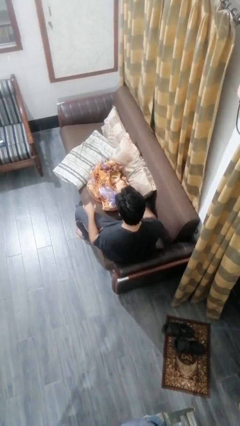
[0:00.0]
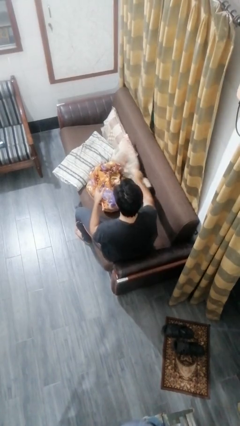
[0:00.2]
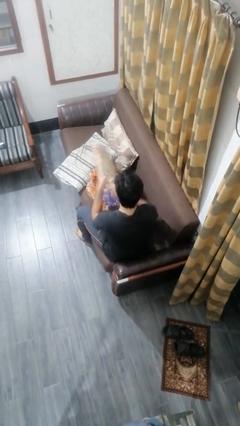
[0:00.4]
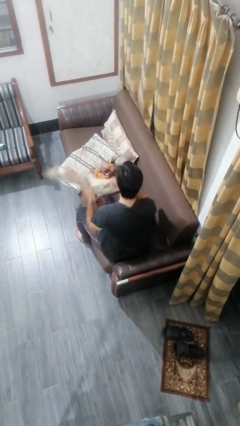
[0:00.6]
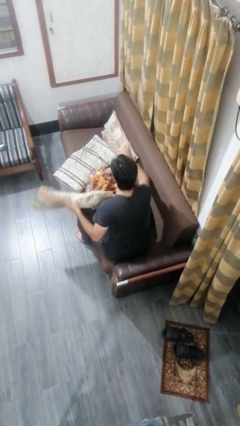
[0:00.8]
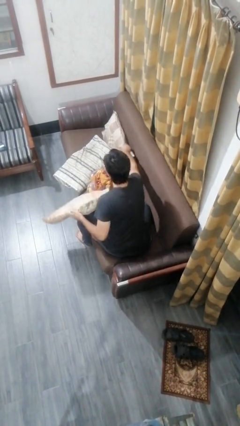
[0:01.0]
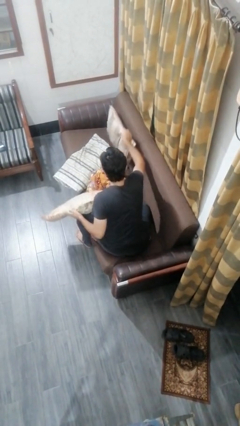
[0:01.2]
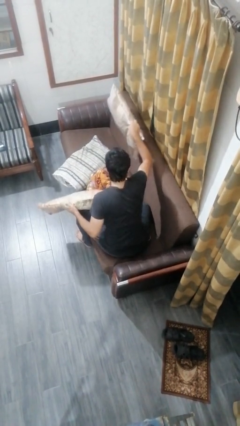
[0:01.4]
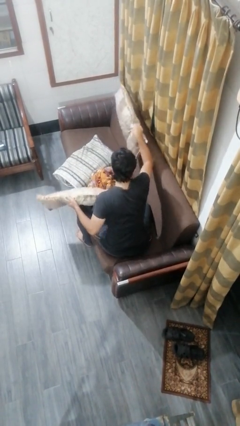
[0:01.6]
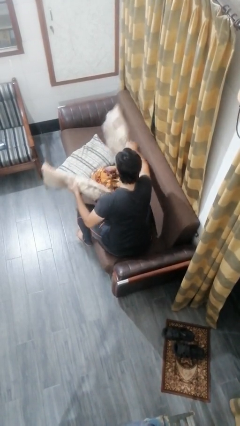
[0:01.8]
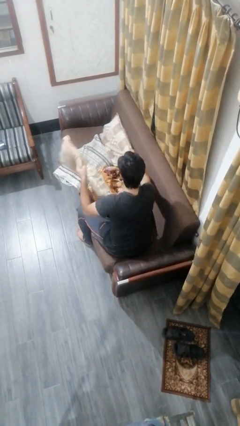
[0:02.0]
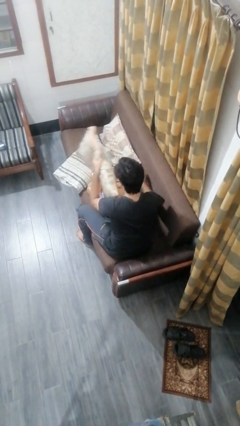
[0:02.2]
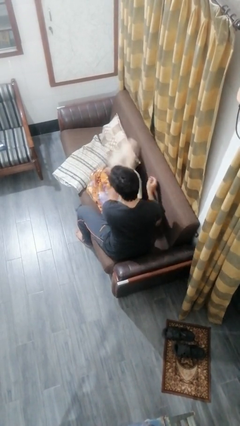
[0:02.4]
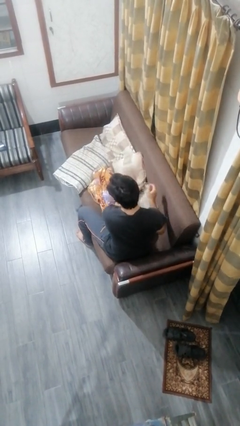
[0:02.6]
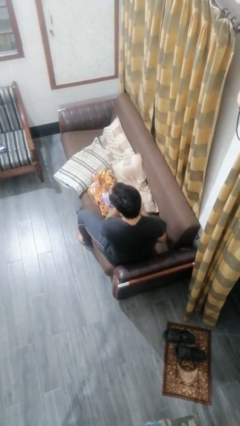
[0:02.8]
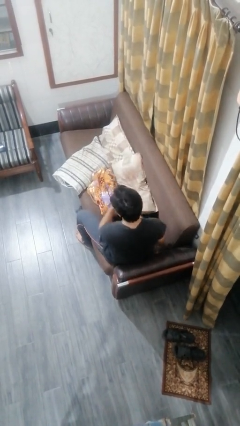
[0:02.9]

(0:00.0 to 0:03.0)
person searches in couch

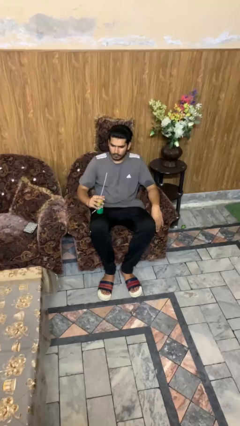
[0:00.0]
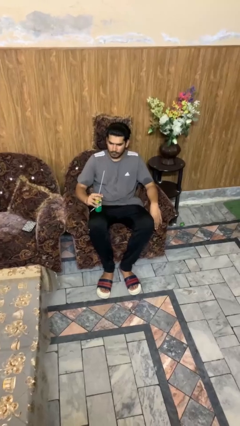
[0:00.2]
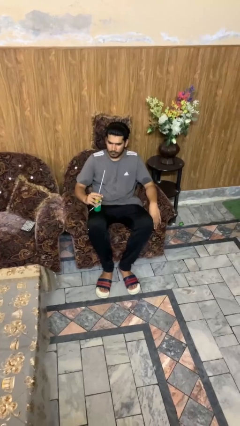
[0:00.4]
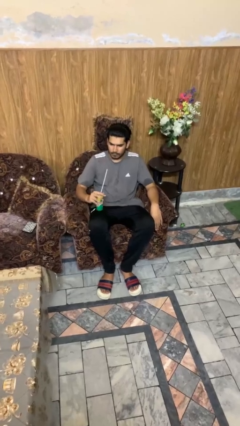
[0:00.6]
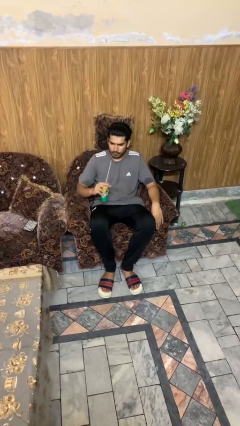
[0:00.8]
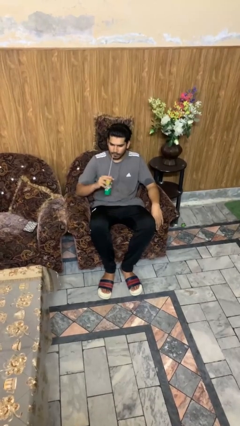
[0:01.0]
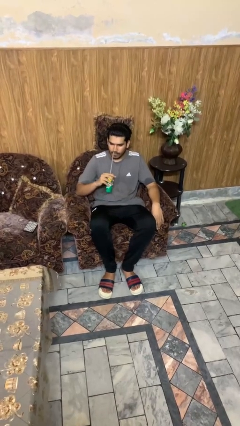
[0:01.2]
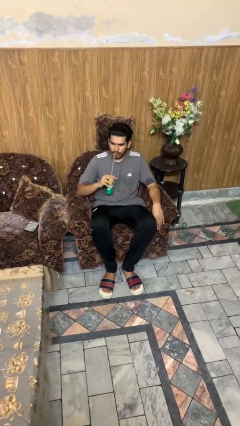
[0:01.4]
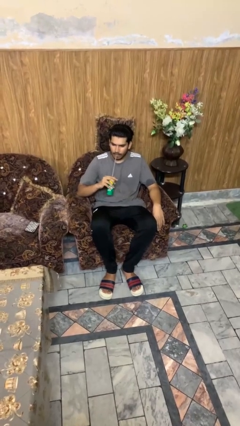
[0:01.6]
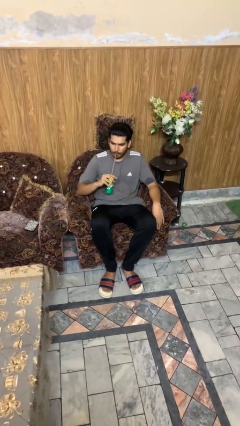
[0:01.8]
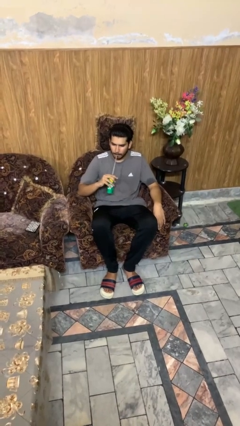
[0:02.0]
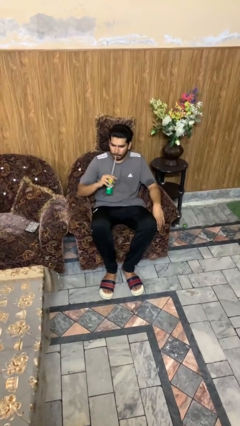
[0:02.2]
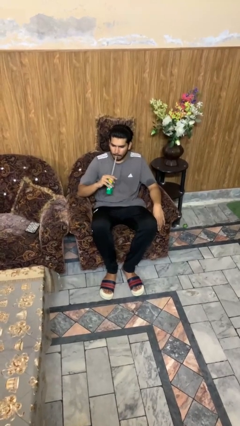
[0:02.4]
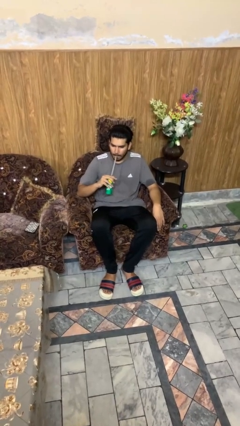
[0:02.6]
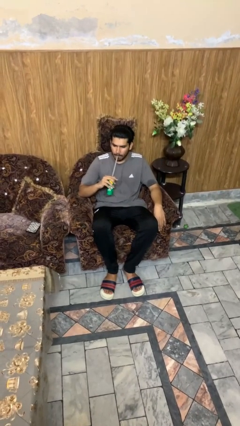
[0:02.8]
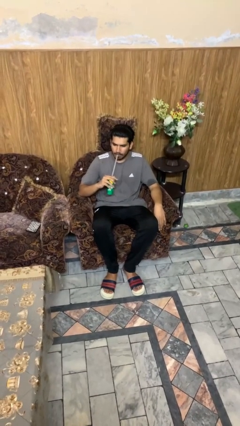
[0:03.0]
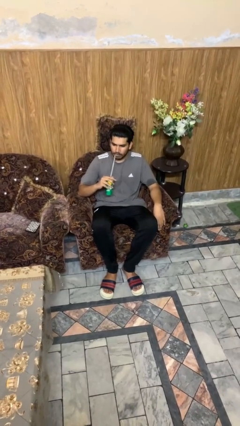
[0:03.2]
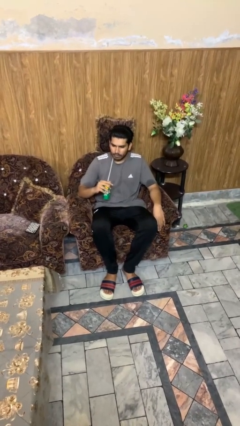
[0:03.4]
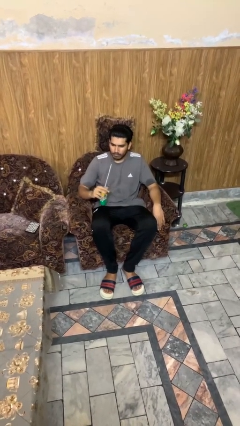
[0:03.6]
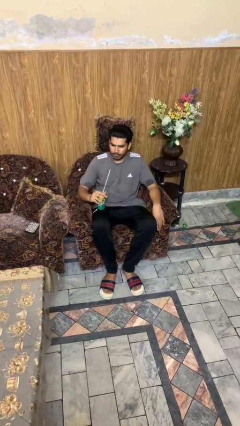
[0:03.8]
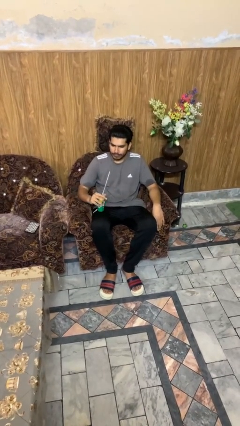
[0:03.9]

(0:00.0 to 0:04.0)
person drinks from straw

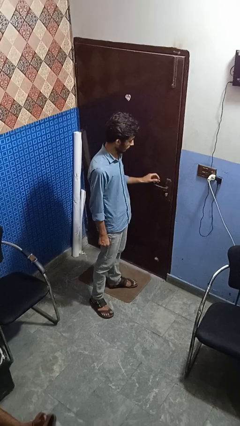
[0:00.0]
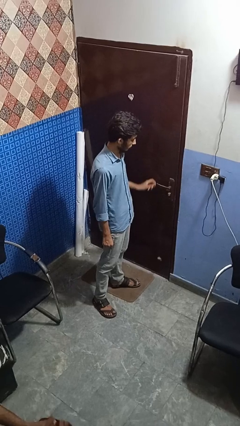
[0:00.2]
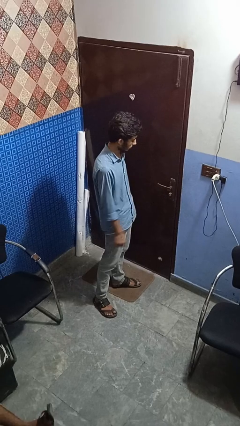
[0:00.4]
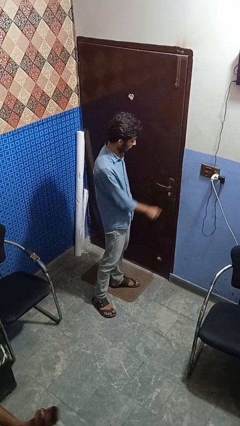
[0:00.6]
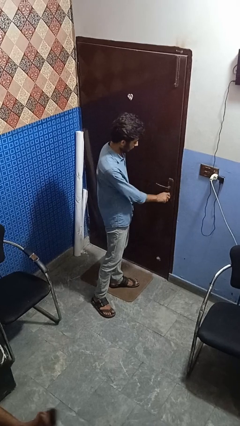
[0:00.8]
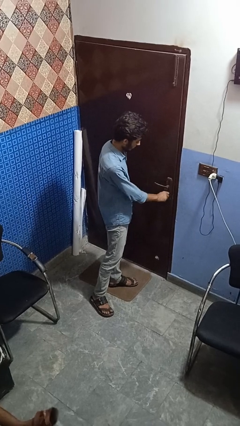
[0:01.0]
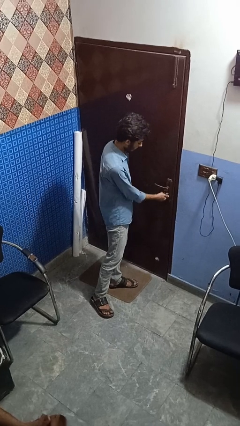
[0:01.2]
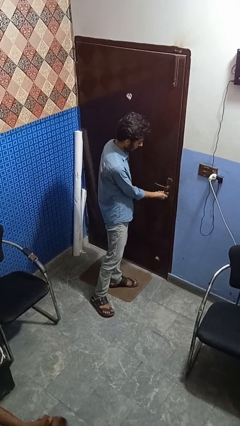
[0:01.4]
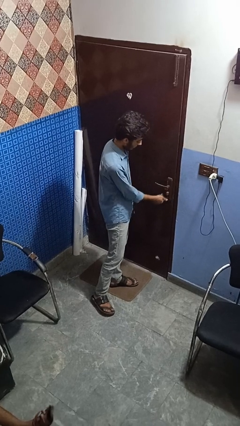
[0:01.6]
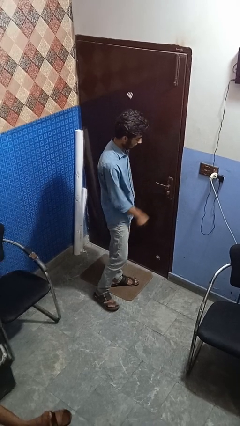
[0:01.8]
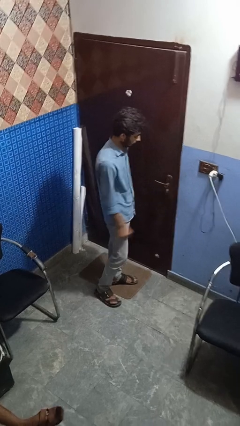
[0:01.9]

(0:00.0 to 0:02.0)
person locks door with keys

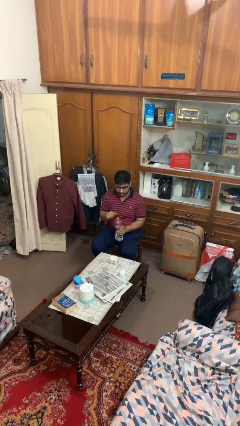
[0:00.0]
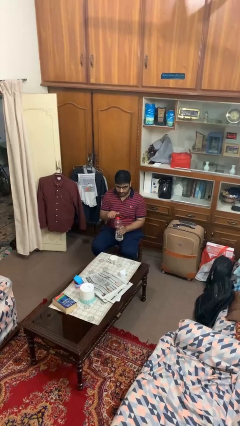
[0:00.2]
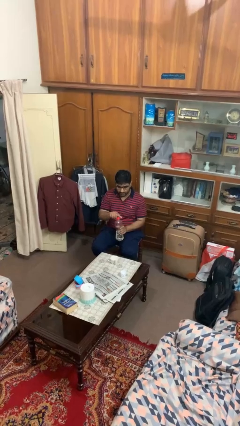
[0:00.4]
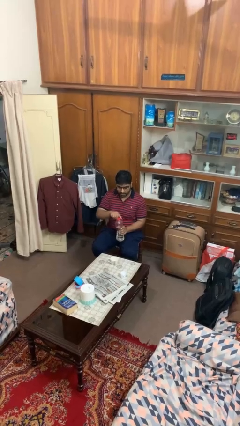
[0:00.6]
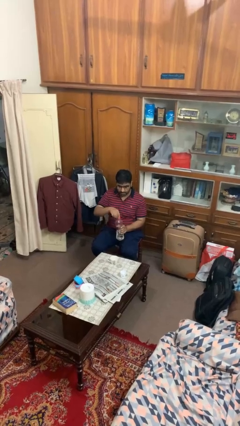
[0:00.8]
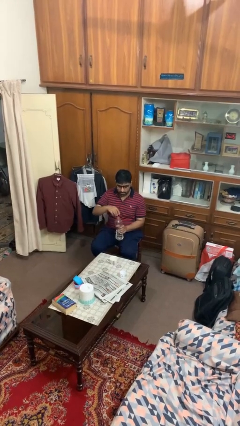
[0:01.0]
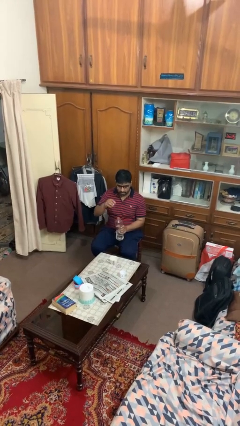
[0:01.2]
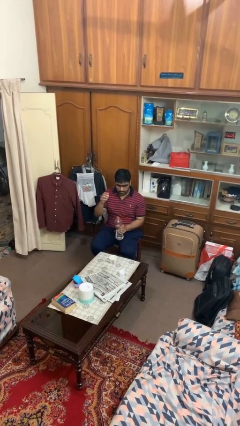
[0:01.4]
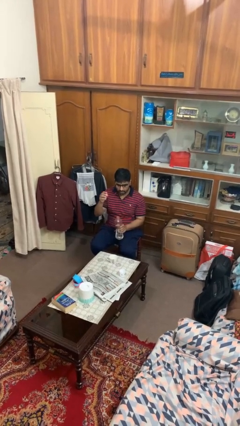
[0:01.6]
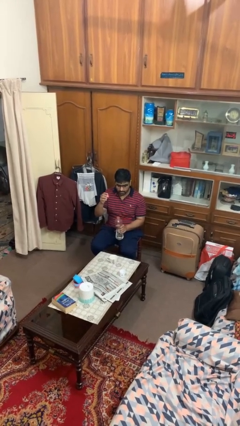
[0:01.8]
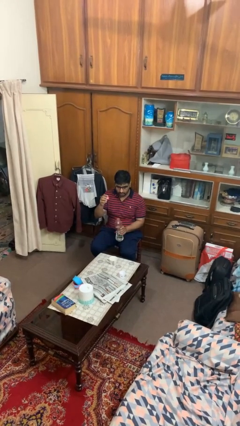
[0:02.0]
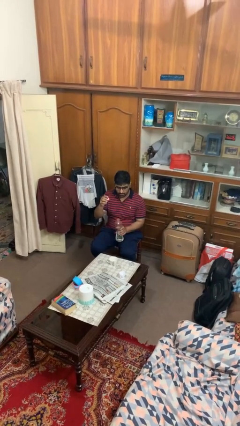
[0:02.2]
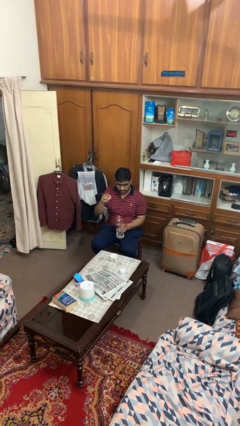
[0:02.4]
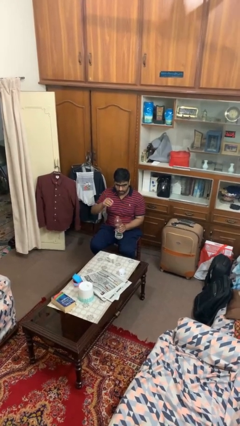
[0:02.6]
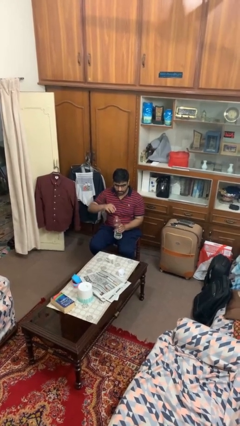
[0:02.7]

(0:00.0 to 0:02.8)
person unscrews lid from bottle

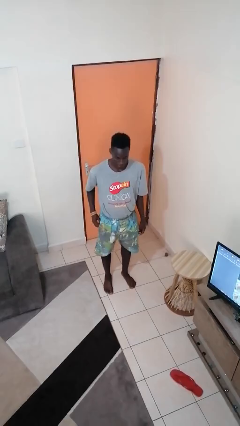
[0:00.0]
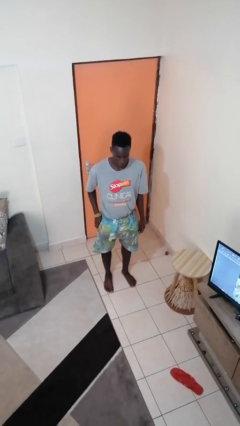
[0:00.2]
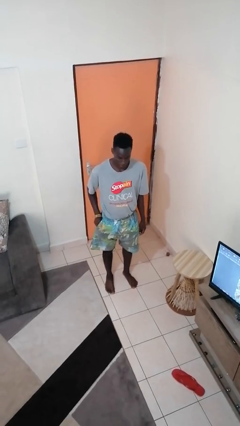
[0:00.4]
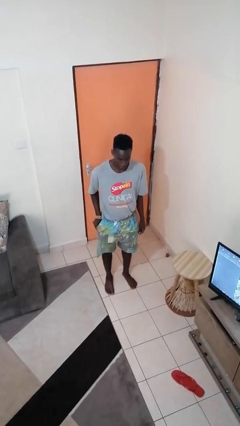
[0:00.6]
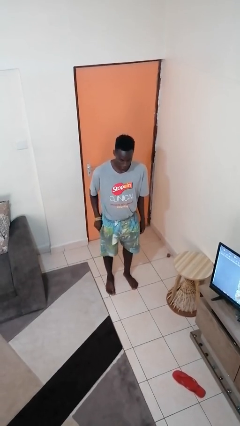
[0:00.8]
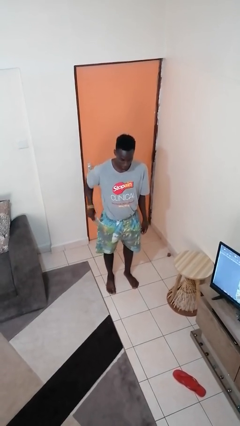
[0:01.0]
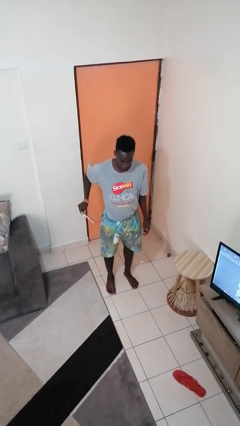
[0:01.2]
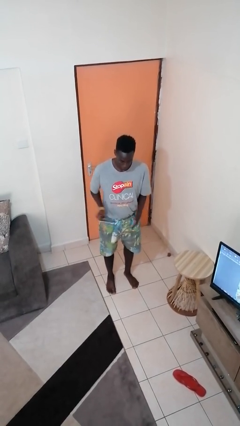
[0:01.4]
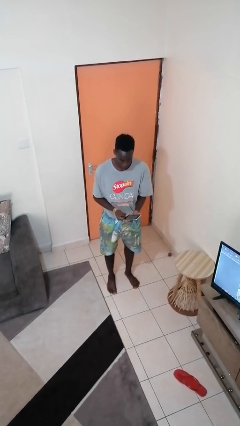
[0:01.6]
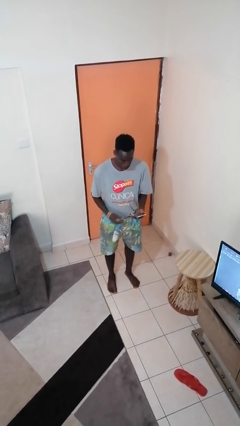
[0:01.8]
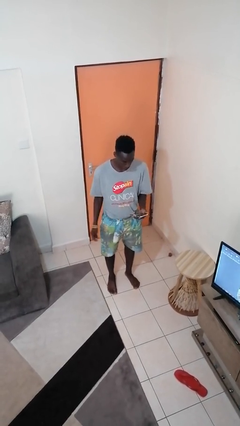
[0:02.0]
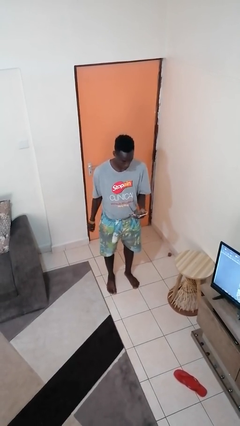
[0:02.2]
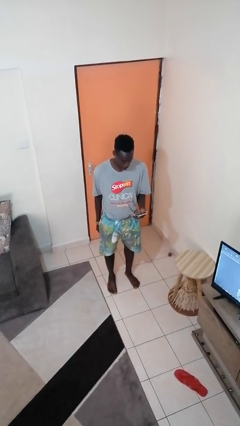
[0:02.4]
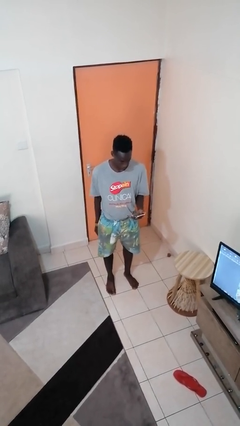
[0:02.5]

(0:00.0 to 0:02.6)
person takes phone from pocket

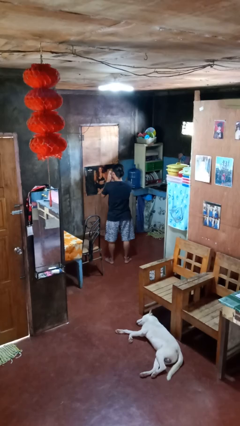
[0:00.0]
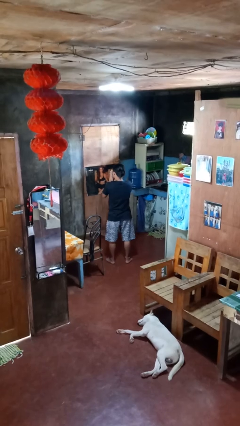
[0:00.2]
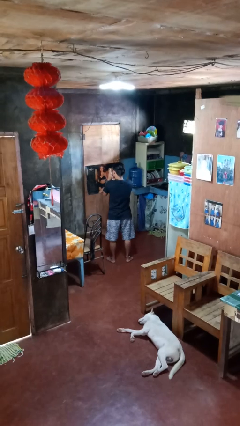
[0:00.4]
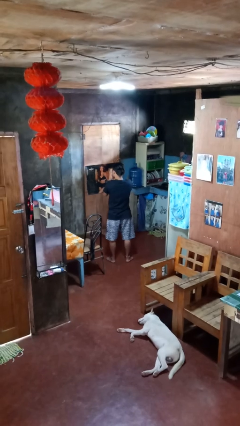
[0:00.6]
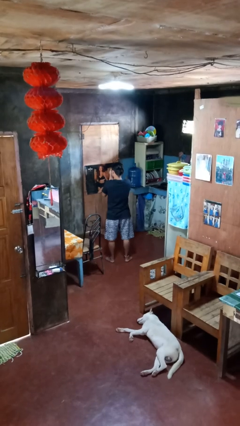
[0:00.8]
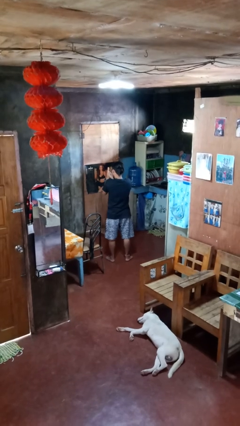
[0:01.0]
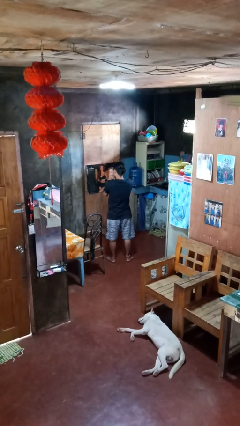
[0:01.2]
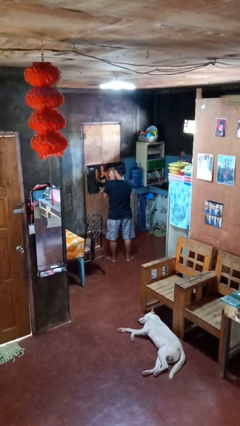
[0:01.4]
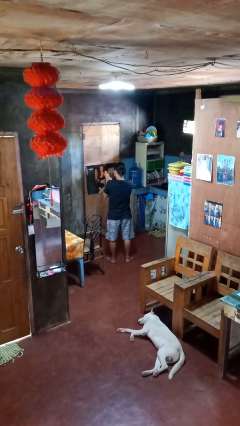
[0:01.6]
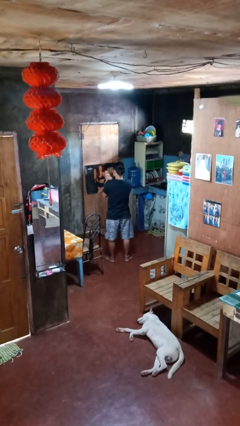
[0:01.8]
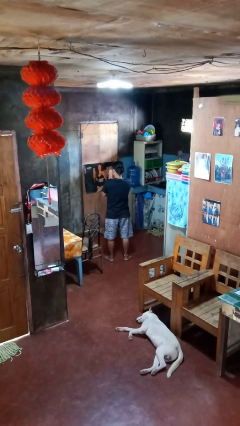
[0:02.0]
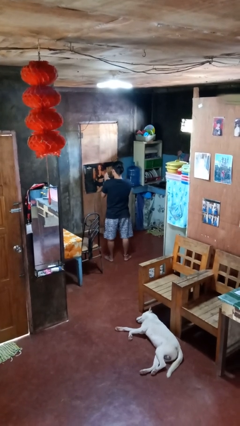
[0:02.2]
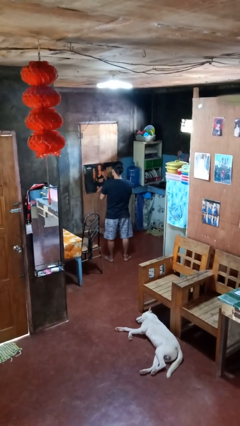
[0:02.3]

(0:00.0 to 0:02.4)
person blows into hands

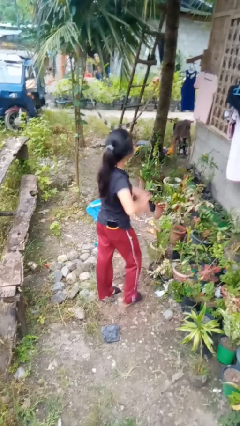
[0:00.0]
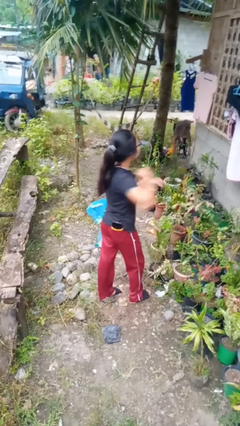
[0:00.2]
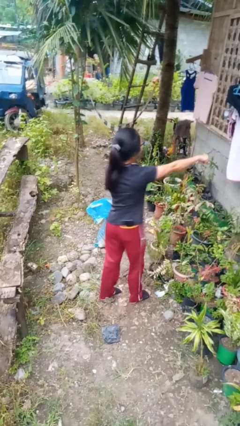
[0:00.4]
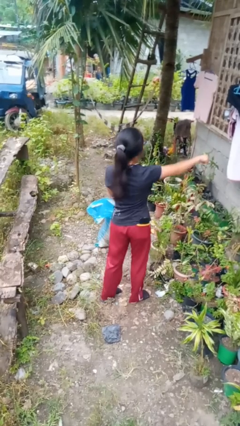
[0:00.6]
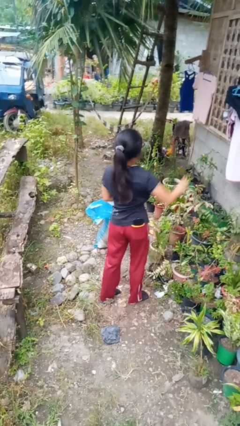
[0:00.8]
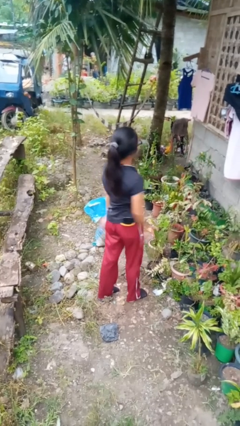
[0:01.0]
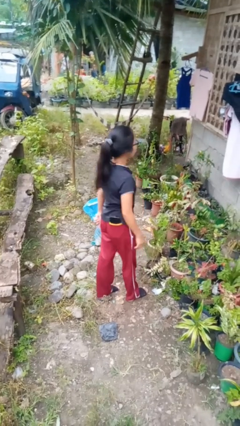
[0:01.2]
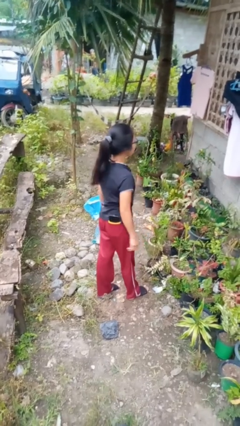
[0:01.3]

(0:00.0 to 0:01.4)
person punches
